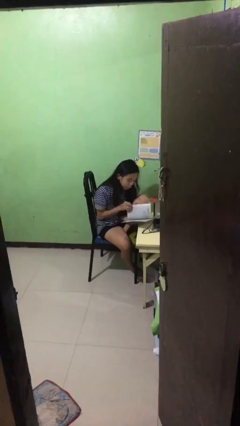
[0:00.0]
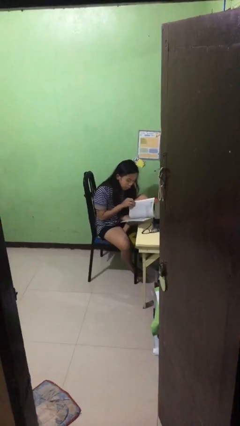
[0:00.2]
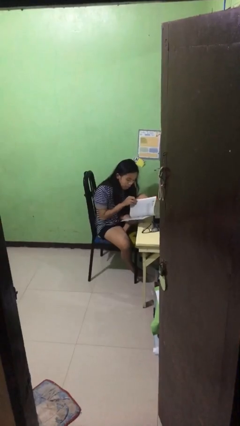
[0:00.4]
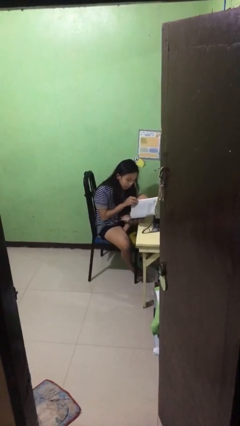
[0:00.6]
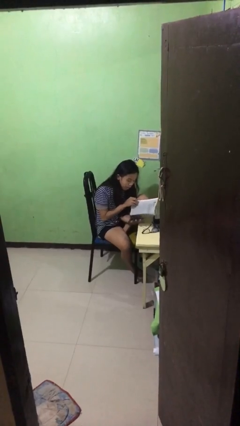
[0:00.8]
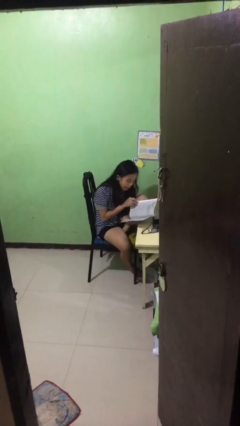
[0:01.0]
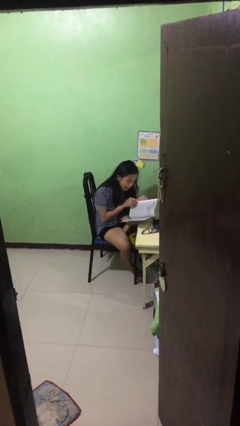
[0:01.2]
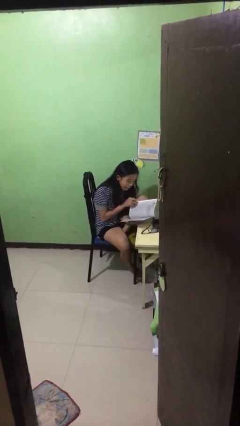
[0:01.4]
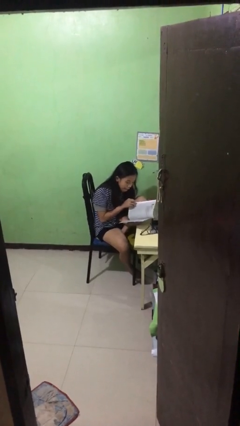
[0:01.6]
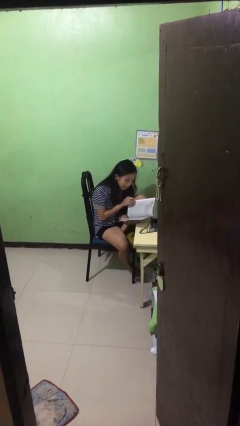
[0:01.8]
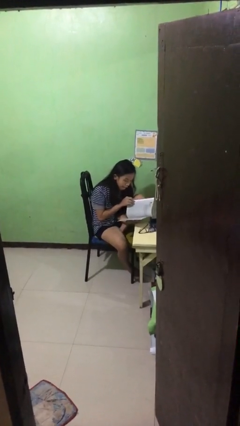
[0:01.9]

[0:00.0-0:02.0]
person reads document

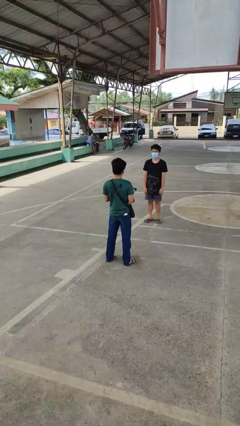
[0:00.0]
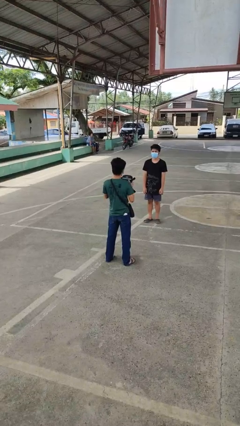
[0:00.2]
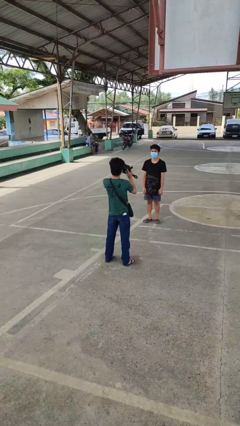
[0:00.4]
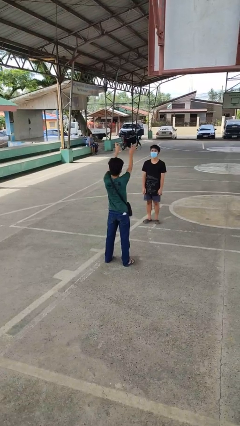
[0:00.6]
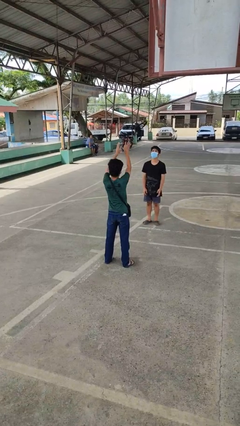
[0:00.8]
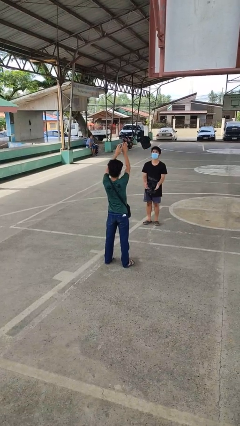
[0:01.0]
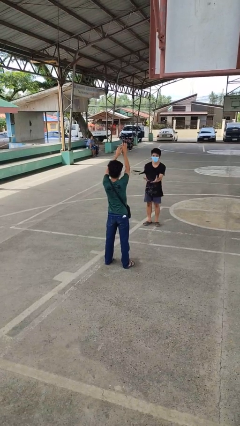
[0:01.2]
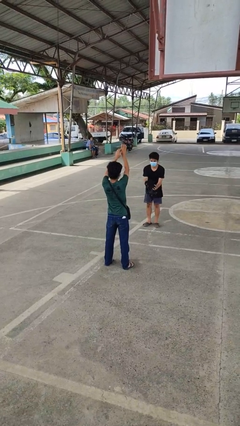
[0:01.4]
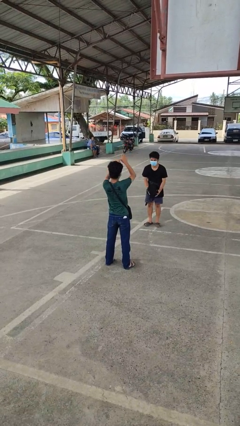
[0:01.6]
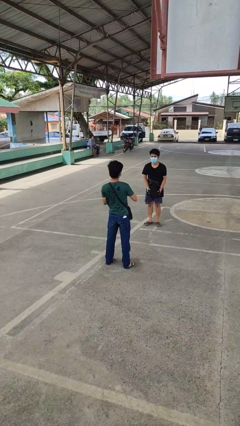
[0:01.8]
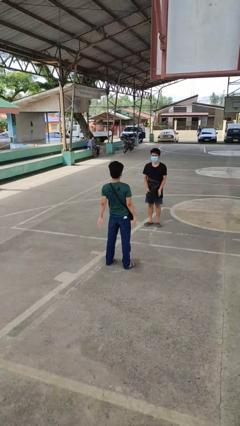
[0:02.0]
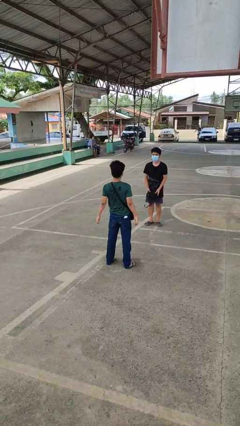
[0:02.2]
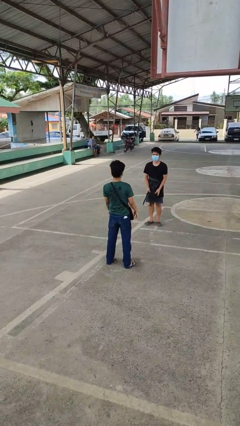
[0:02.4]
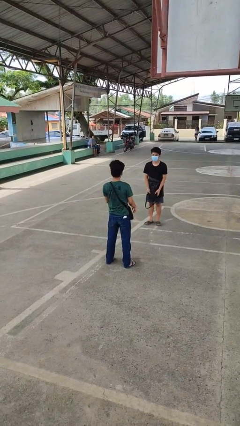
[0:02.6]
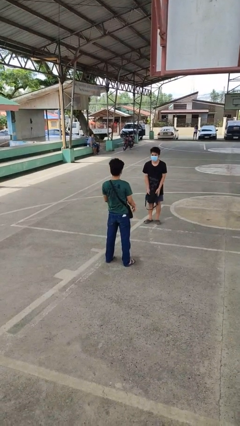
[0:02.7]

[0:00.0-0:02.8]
person throws object to person

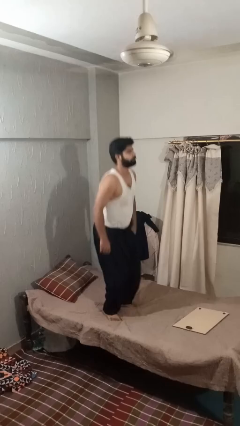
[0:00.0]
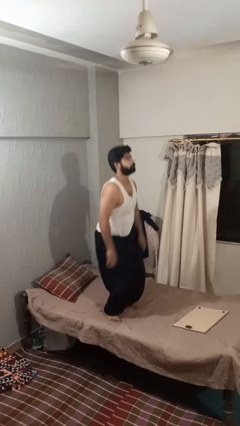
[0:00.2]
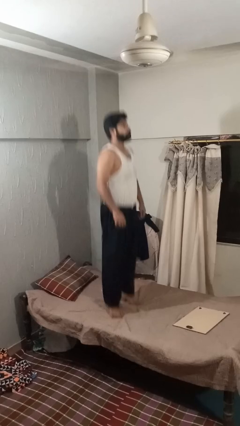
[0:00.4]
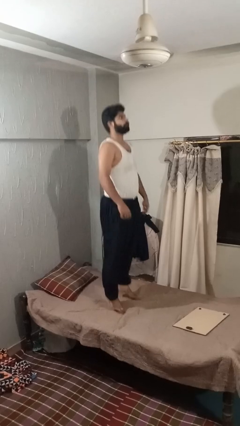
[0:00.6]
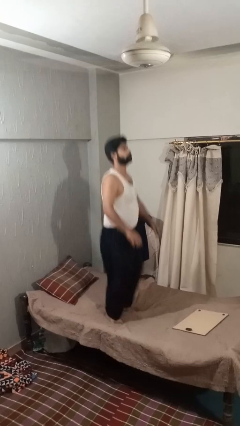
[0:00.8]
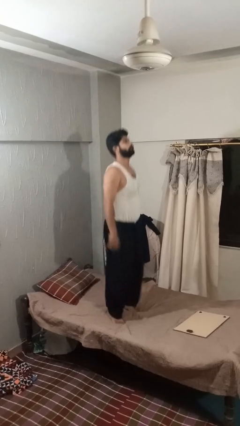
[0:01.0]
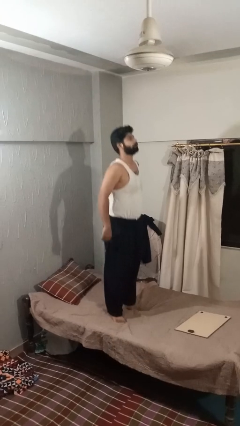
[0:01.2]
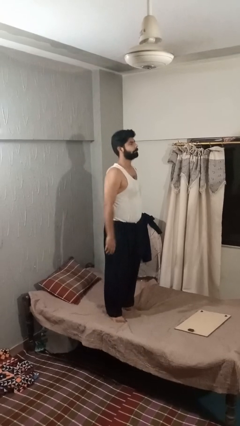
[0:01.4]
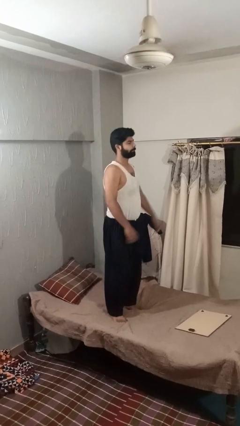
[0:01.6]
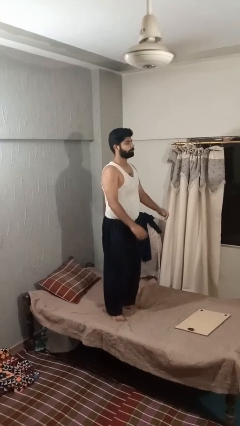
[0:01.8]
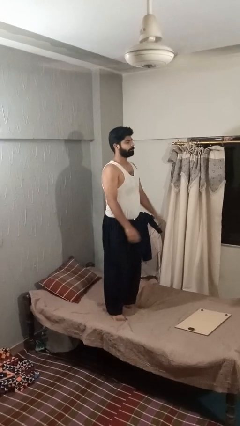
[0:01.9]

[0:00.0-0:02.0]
person jumps on bed

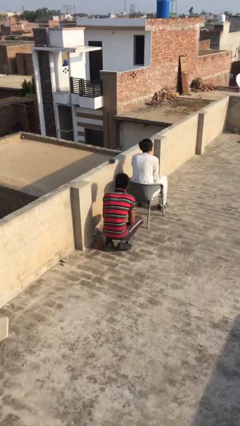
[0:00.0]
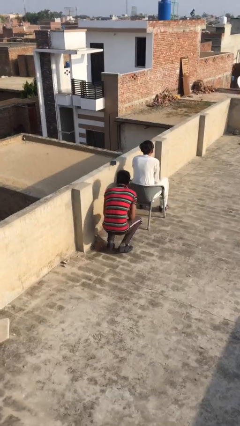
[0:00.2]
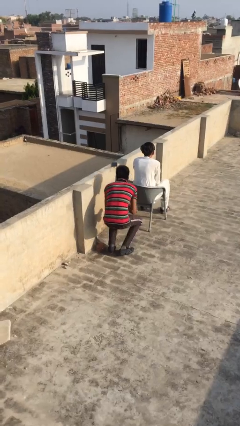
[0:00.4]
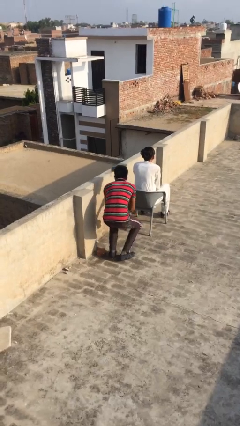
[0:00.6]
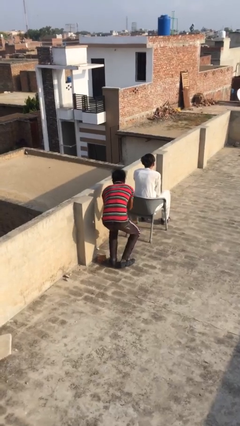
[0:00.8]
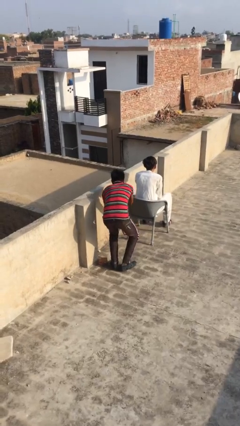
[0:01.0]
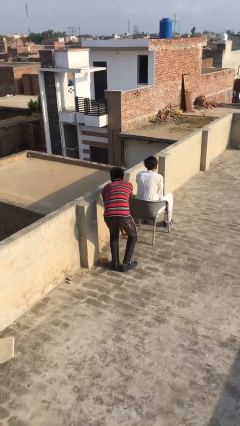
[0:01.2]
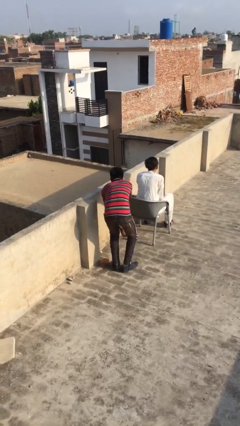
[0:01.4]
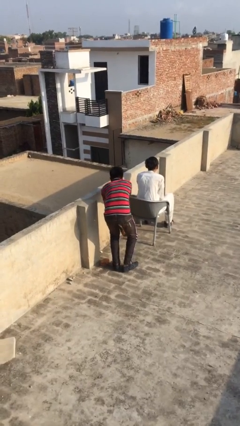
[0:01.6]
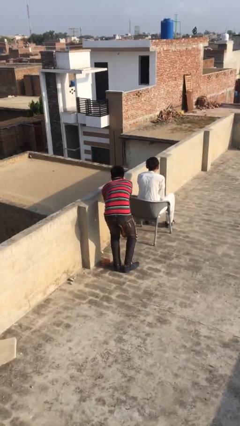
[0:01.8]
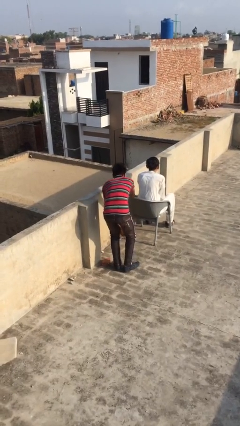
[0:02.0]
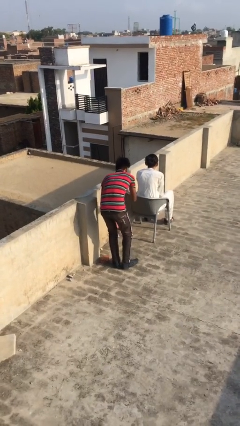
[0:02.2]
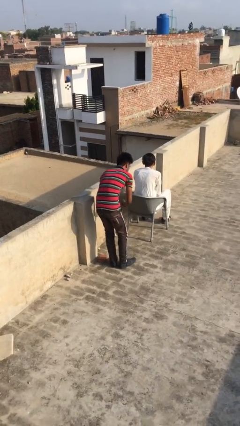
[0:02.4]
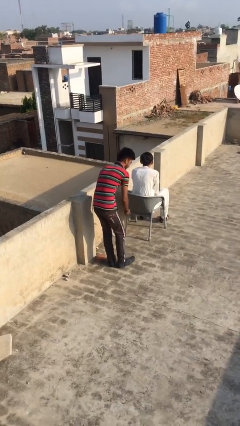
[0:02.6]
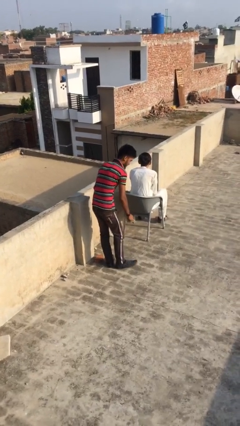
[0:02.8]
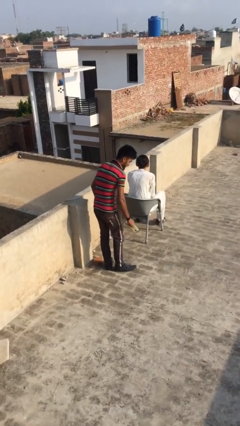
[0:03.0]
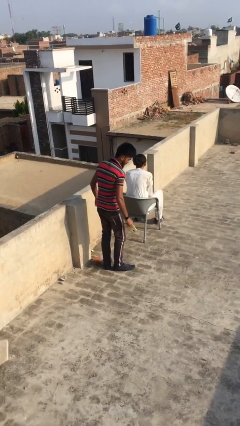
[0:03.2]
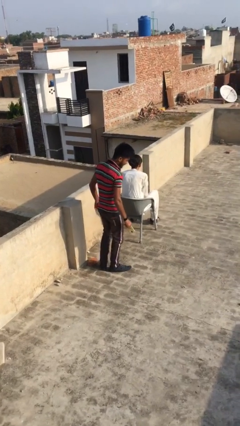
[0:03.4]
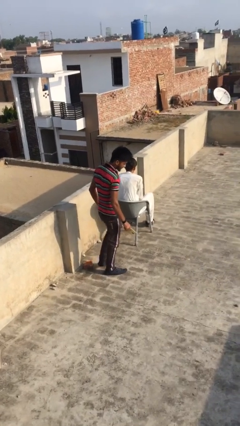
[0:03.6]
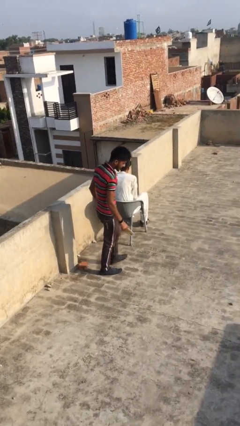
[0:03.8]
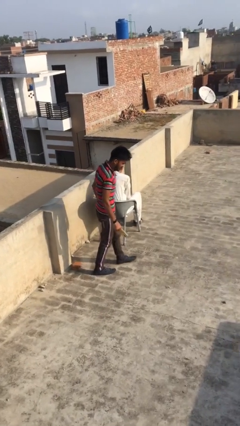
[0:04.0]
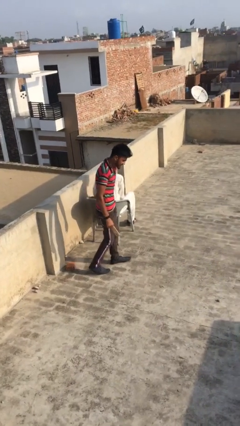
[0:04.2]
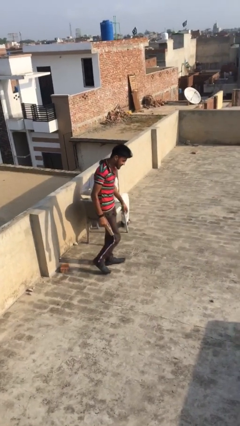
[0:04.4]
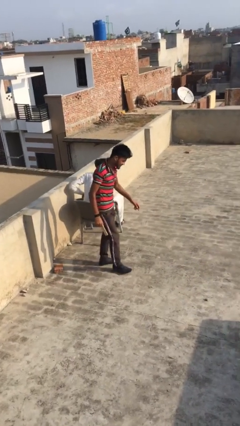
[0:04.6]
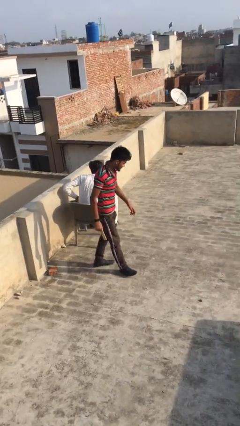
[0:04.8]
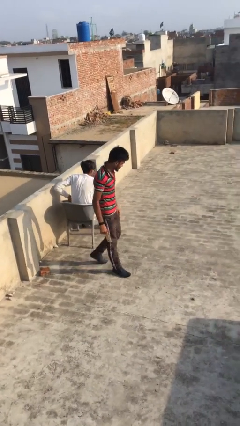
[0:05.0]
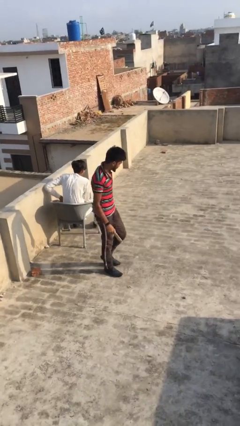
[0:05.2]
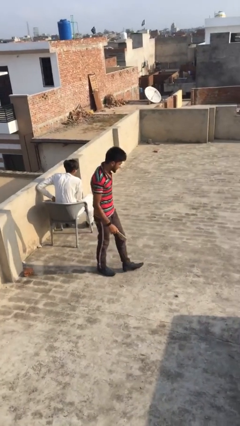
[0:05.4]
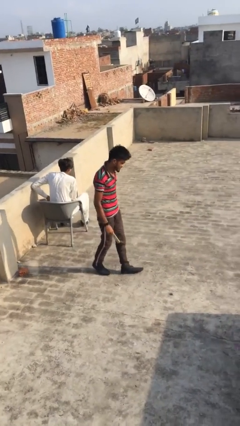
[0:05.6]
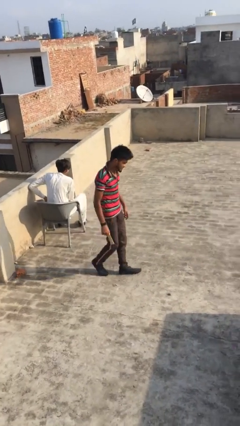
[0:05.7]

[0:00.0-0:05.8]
person steals object from person

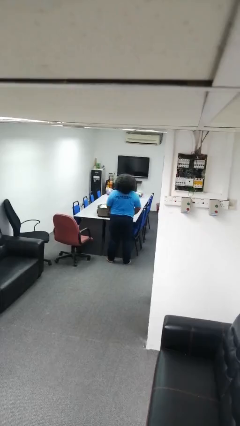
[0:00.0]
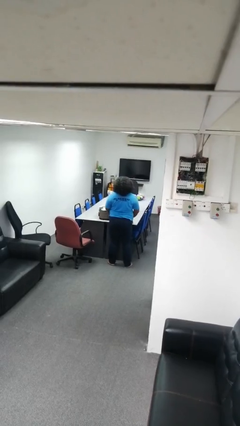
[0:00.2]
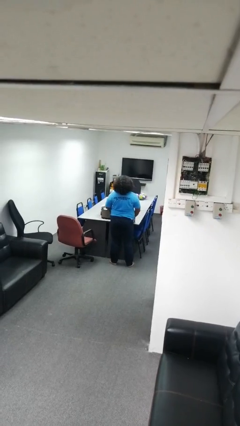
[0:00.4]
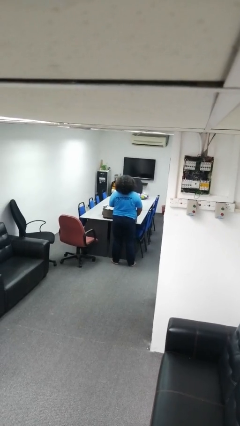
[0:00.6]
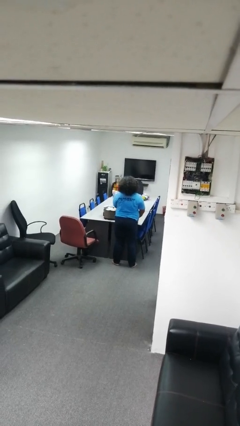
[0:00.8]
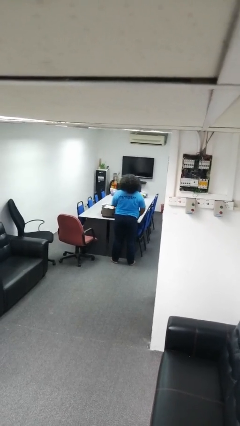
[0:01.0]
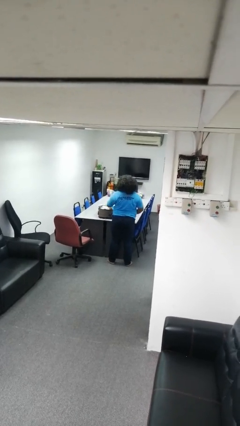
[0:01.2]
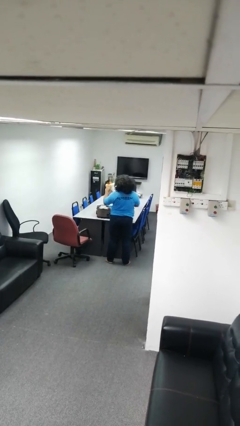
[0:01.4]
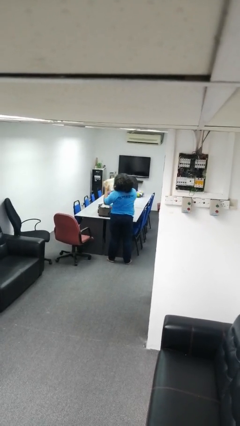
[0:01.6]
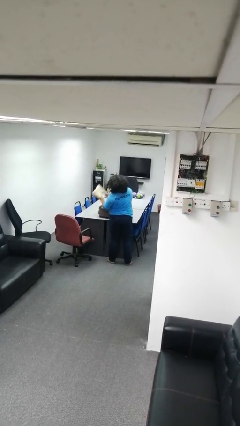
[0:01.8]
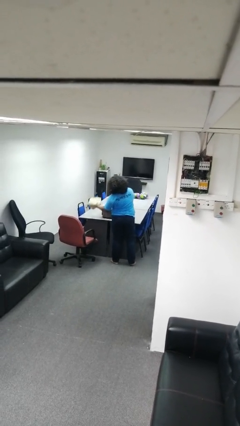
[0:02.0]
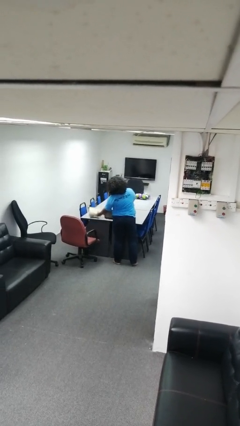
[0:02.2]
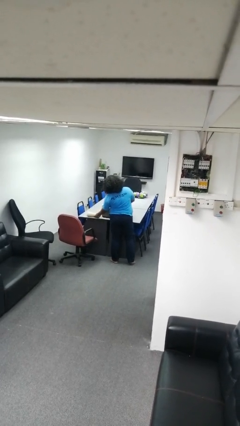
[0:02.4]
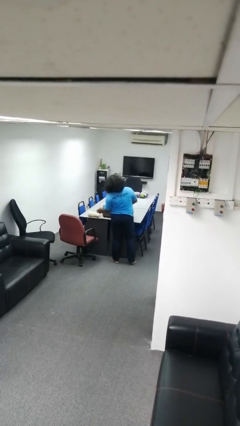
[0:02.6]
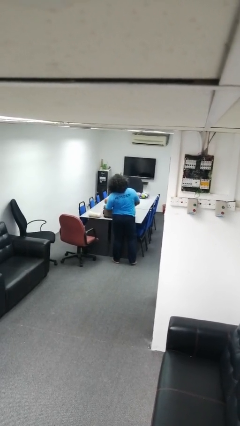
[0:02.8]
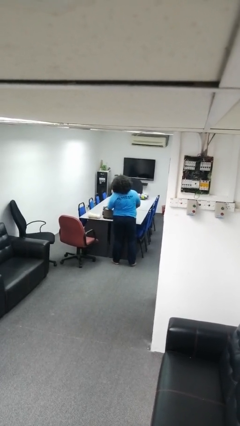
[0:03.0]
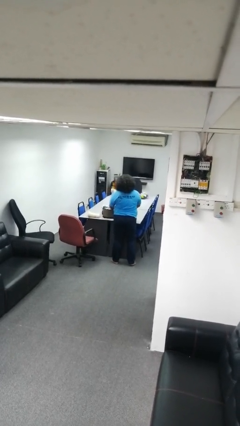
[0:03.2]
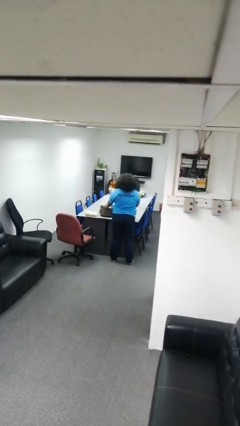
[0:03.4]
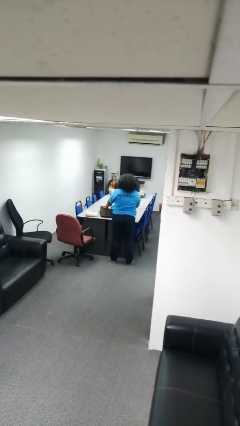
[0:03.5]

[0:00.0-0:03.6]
person unloads clothes from suitcase

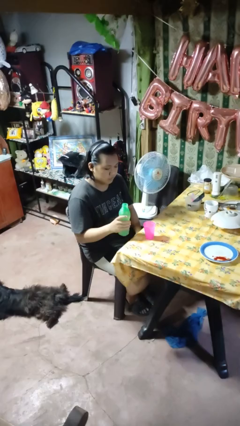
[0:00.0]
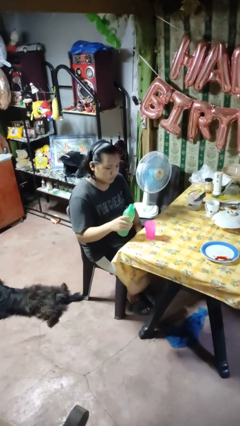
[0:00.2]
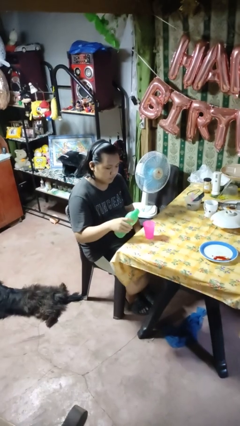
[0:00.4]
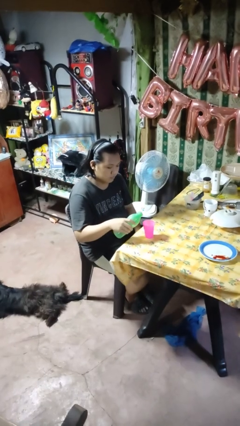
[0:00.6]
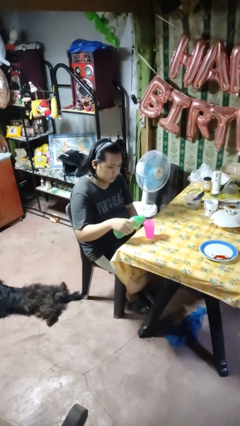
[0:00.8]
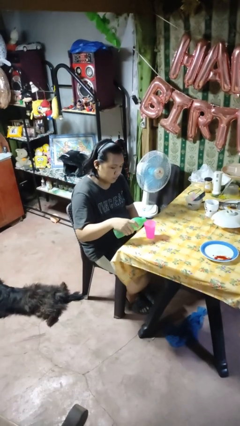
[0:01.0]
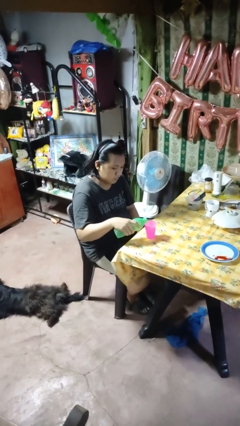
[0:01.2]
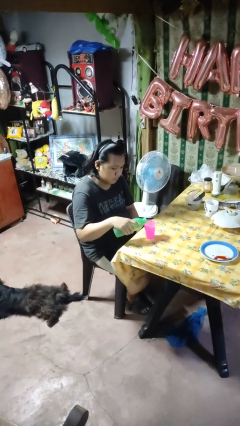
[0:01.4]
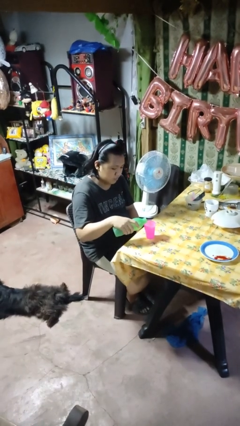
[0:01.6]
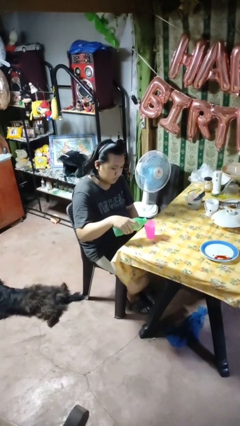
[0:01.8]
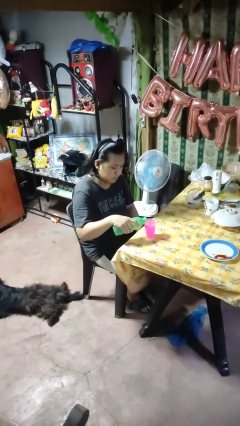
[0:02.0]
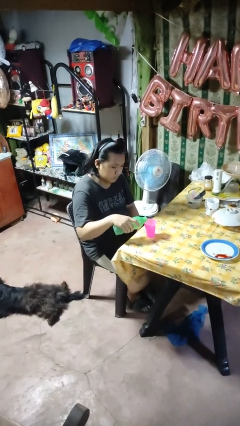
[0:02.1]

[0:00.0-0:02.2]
person pours liquid into cup
